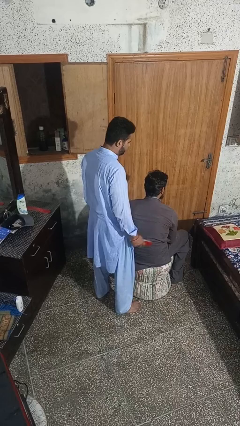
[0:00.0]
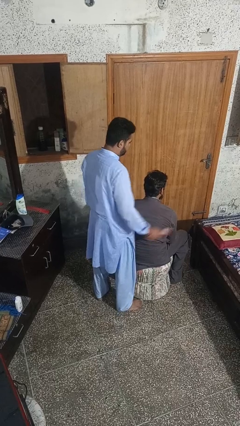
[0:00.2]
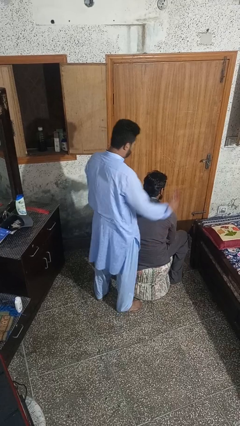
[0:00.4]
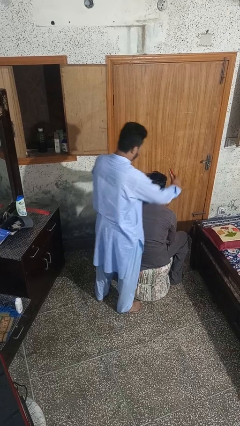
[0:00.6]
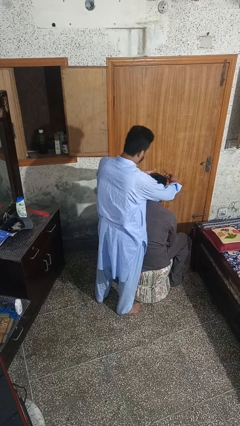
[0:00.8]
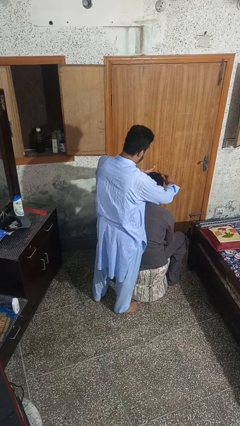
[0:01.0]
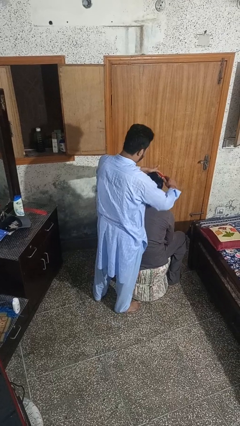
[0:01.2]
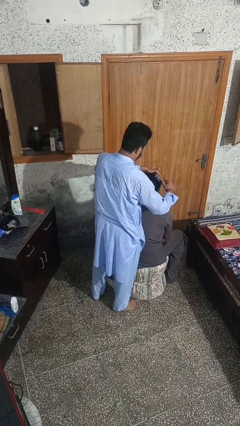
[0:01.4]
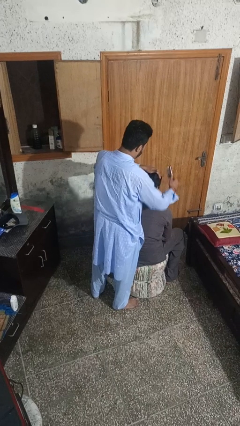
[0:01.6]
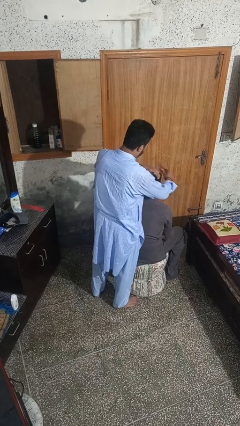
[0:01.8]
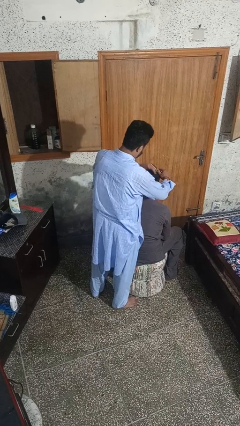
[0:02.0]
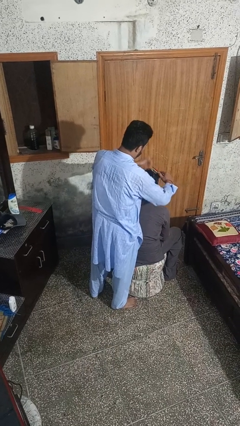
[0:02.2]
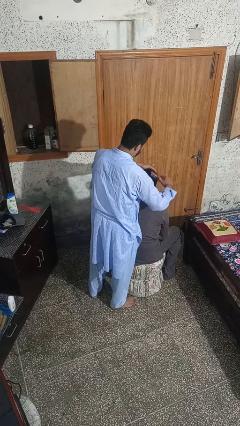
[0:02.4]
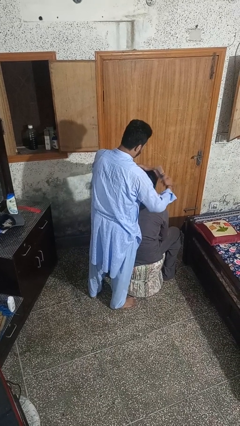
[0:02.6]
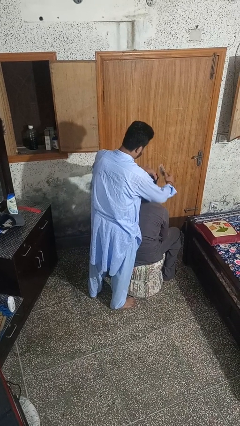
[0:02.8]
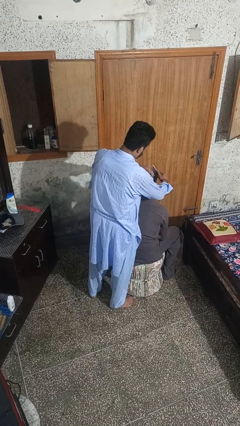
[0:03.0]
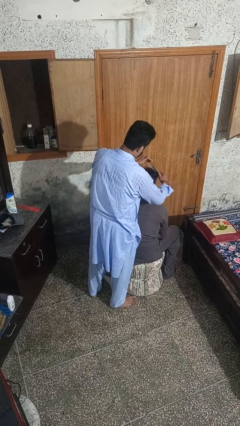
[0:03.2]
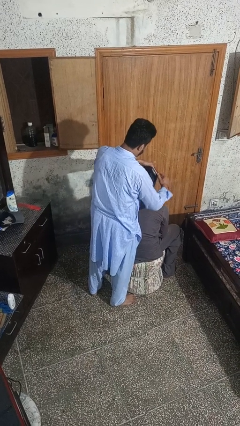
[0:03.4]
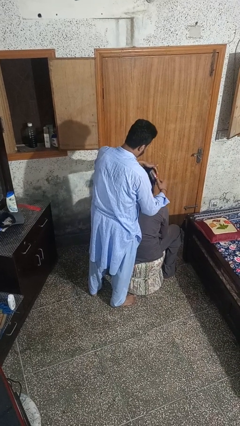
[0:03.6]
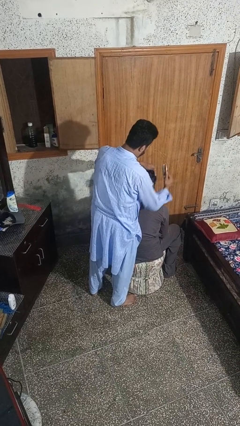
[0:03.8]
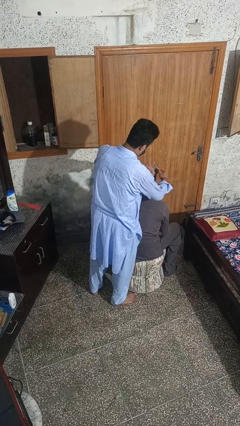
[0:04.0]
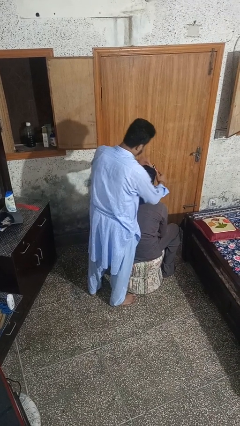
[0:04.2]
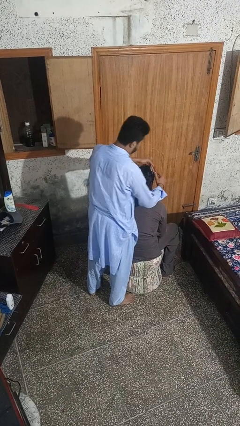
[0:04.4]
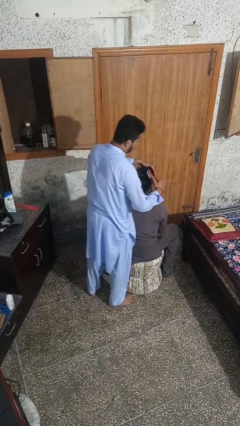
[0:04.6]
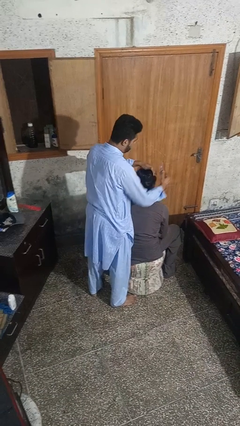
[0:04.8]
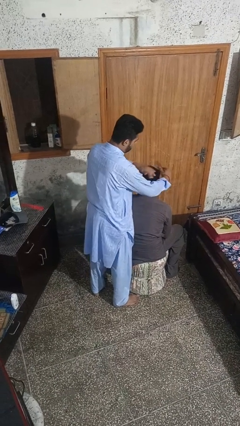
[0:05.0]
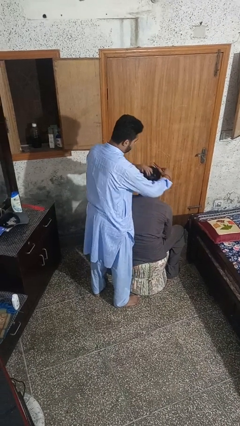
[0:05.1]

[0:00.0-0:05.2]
person brushes hair of person

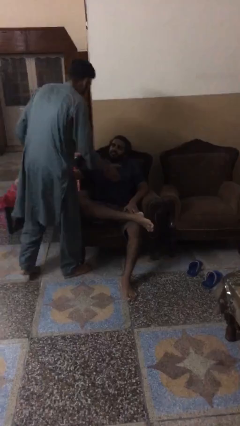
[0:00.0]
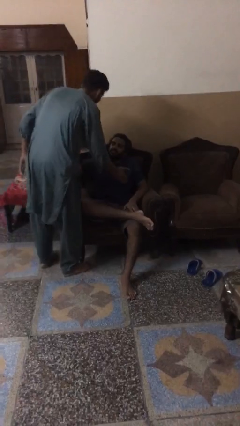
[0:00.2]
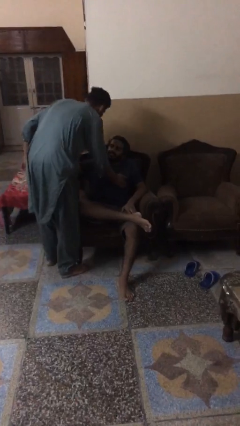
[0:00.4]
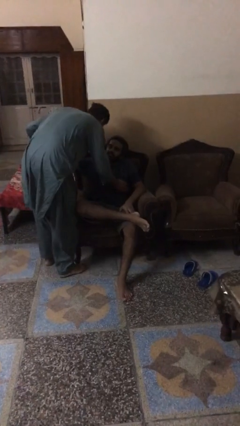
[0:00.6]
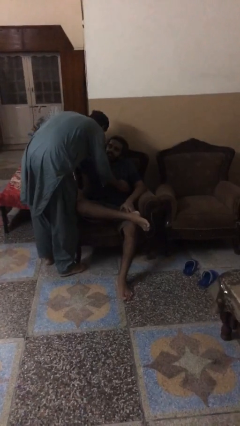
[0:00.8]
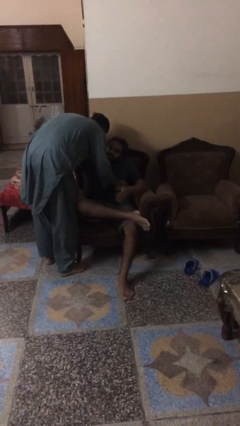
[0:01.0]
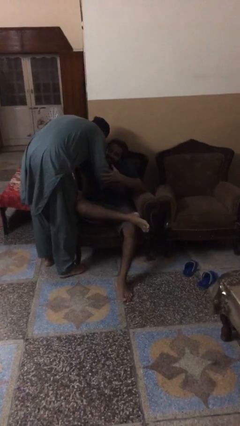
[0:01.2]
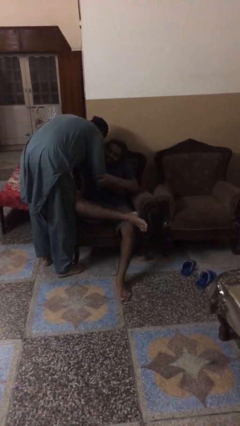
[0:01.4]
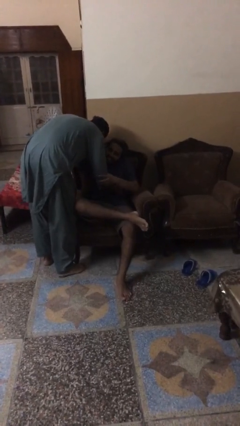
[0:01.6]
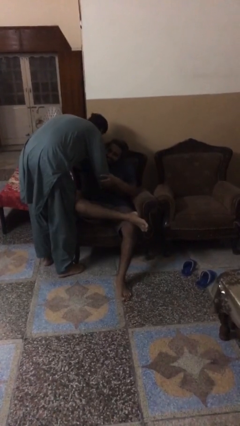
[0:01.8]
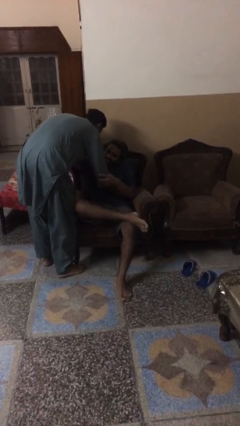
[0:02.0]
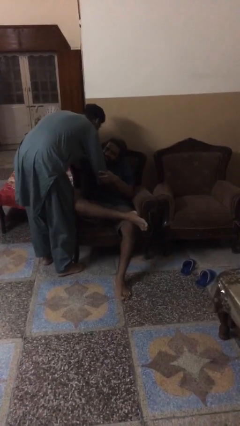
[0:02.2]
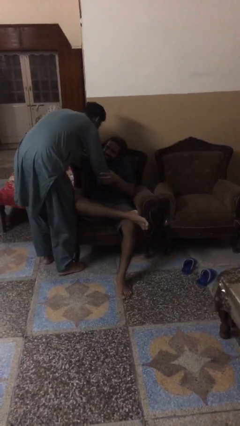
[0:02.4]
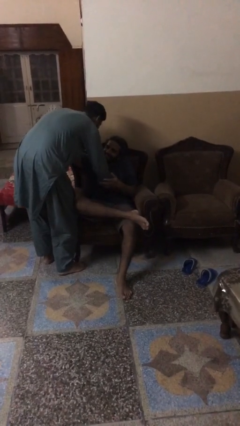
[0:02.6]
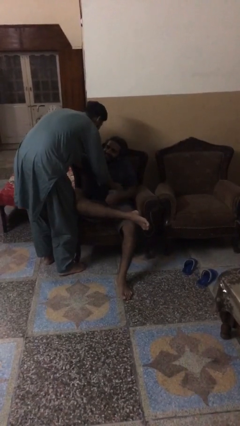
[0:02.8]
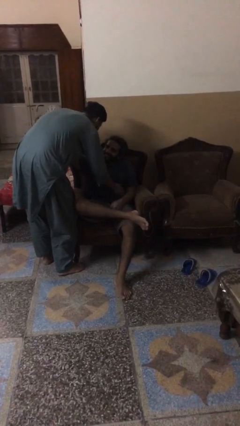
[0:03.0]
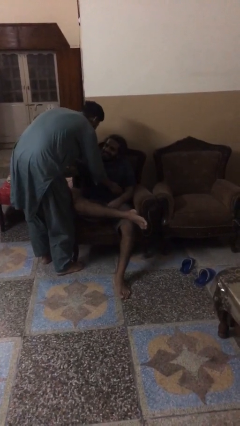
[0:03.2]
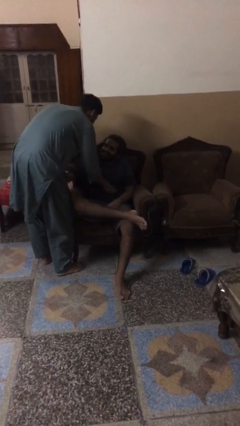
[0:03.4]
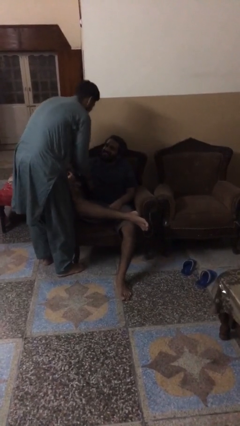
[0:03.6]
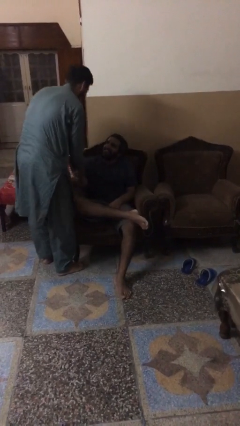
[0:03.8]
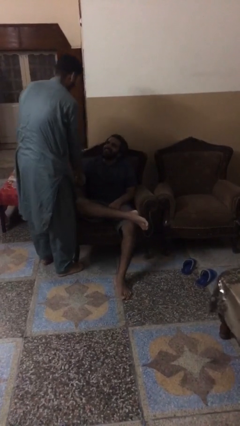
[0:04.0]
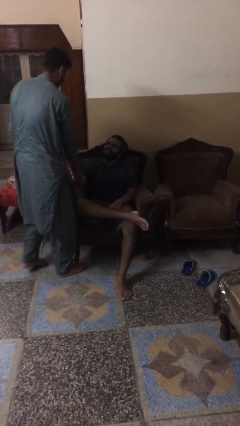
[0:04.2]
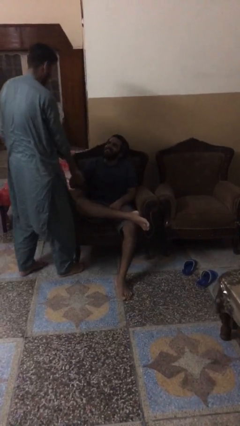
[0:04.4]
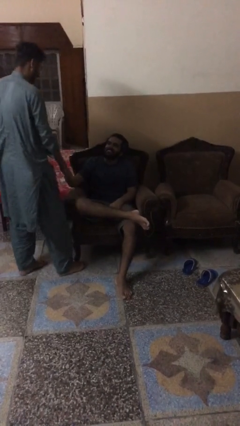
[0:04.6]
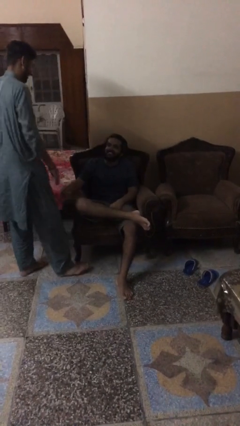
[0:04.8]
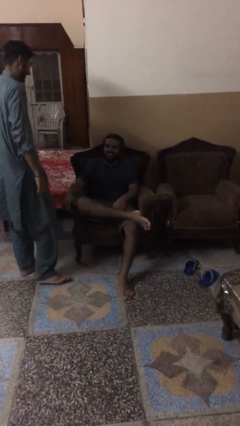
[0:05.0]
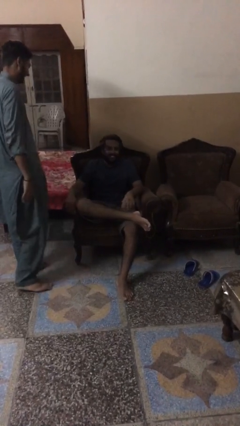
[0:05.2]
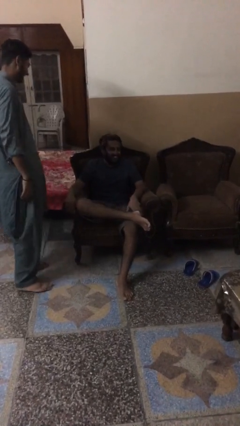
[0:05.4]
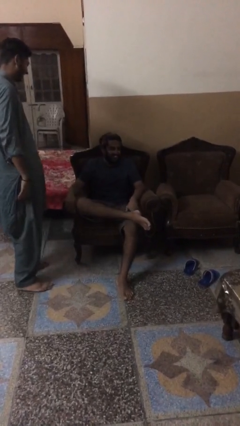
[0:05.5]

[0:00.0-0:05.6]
person embraces person

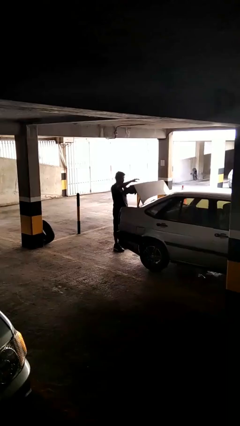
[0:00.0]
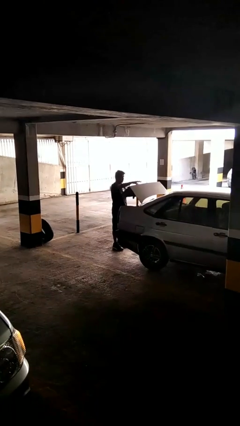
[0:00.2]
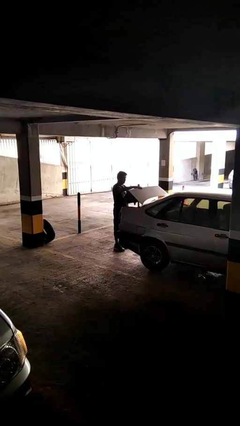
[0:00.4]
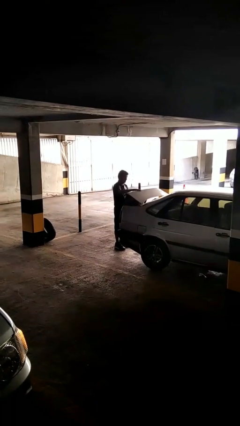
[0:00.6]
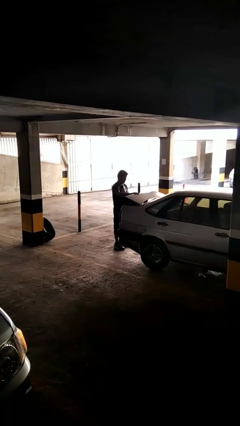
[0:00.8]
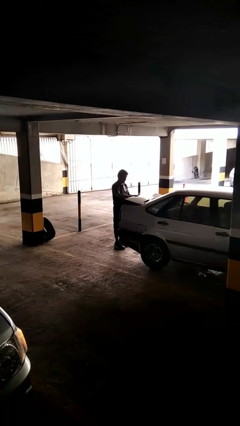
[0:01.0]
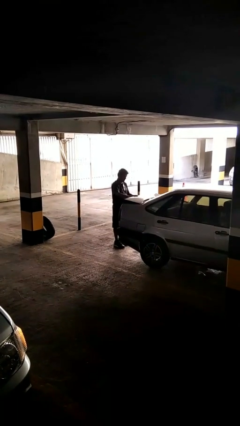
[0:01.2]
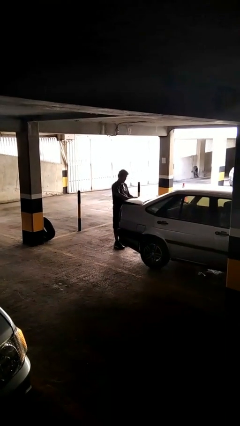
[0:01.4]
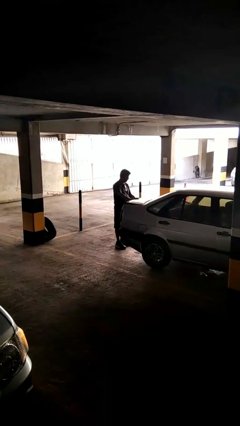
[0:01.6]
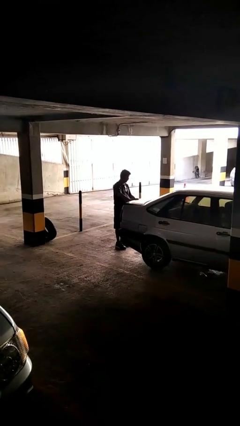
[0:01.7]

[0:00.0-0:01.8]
person closes car trunk

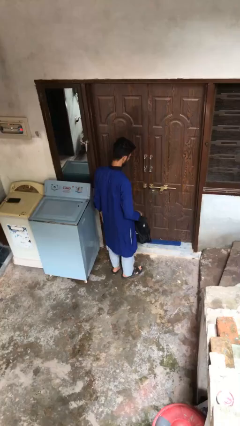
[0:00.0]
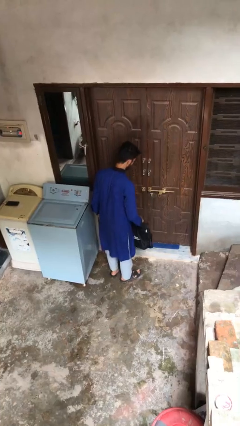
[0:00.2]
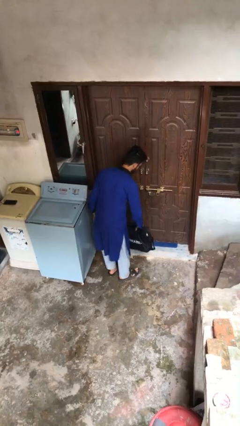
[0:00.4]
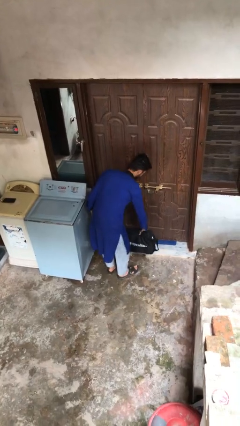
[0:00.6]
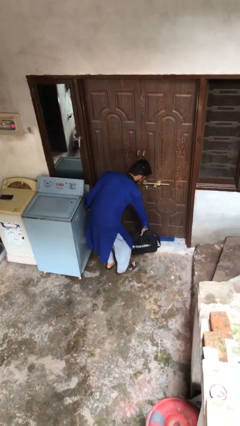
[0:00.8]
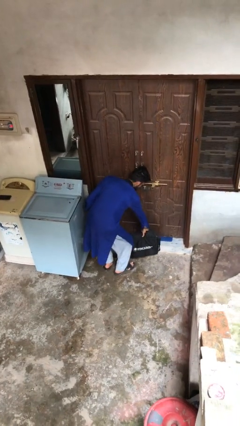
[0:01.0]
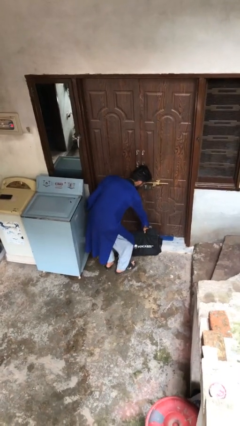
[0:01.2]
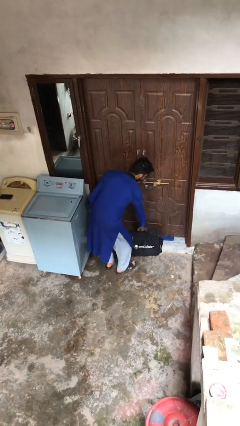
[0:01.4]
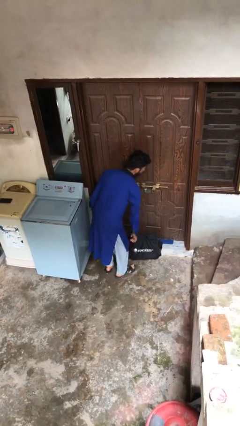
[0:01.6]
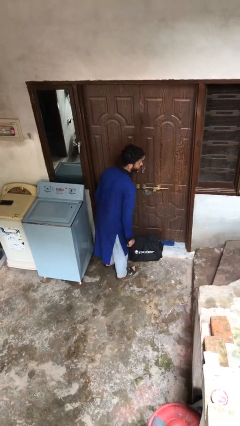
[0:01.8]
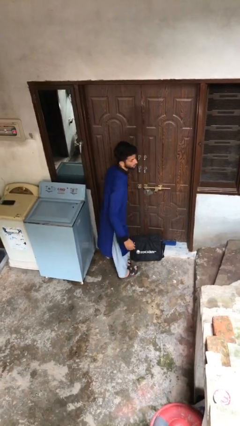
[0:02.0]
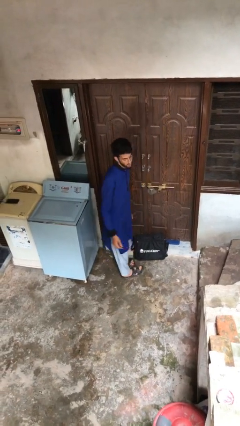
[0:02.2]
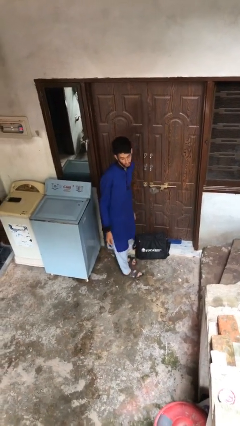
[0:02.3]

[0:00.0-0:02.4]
person puts down object on floor

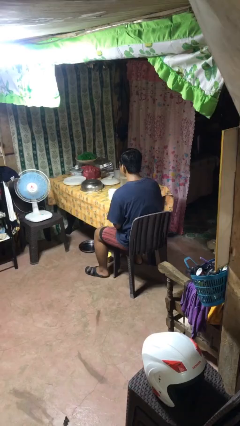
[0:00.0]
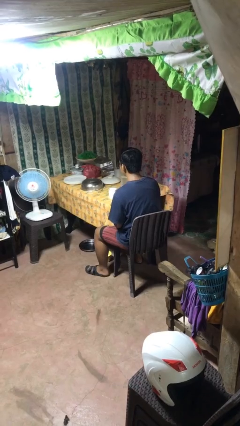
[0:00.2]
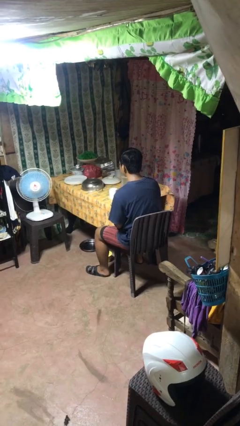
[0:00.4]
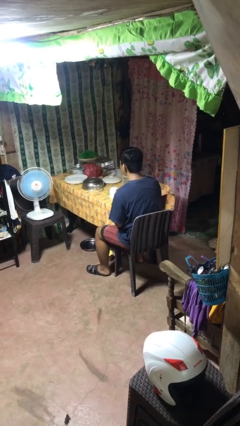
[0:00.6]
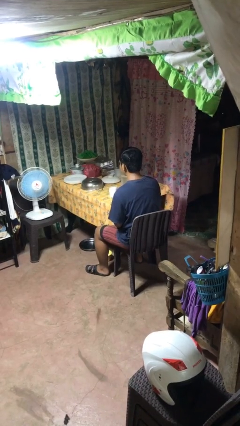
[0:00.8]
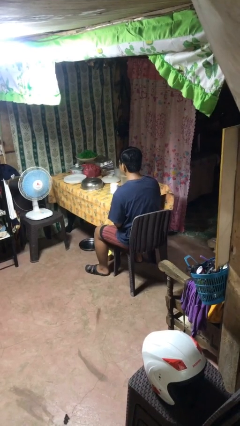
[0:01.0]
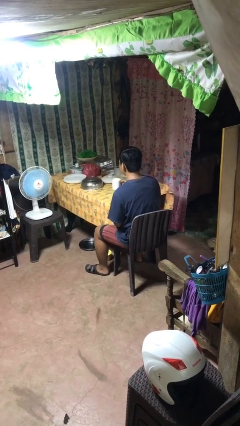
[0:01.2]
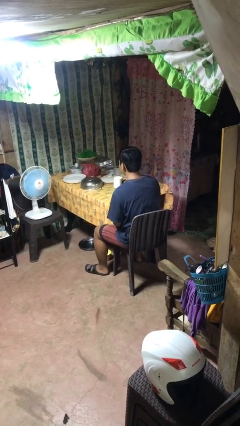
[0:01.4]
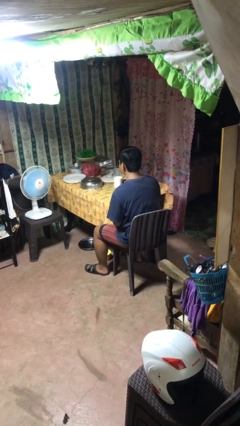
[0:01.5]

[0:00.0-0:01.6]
person picks up object from table

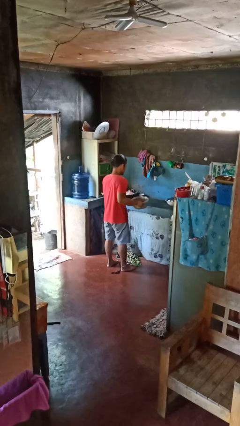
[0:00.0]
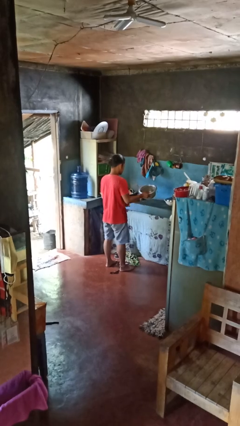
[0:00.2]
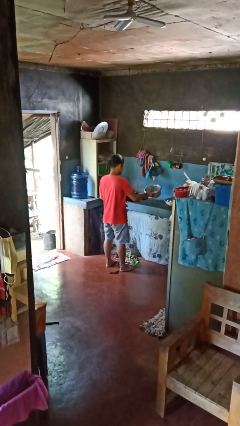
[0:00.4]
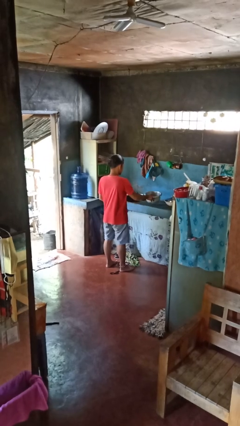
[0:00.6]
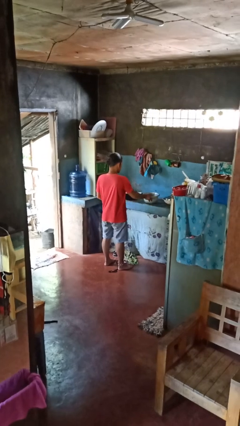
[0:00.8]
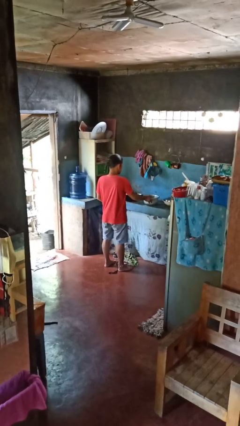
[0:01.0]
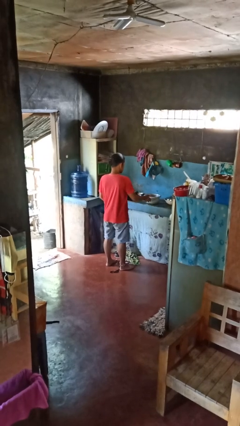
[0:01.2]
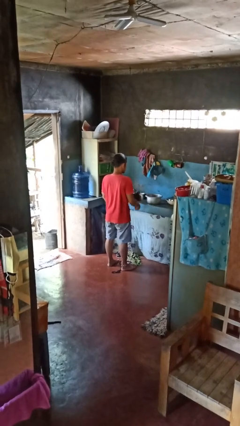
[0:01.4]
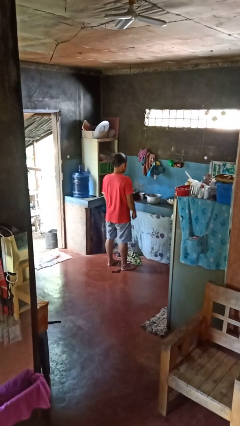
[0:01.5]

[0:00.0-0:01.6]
person puts down object on countertop
